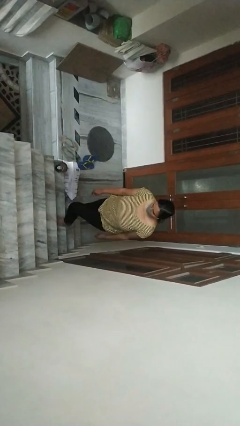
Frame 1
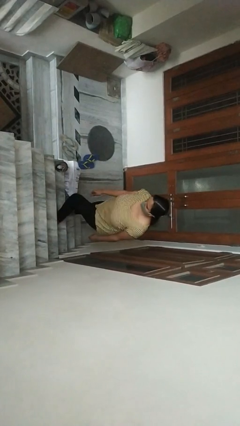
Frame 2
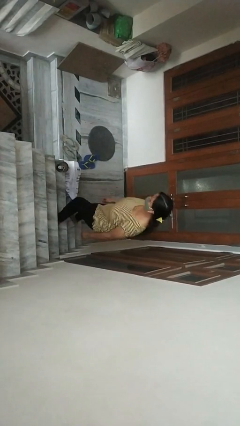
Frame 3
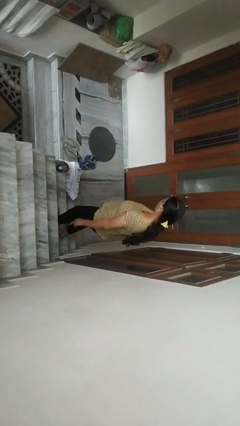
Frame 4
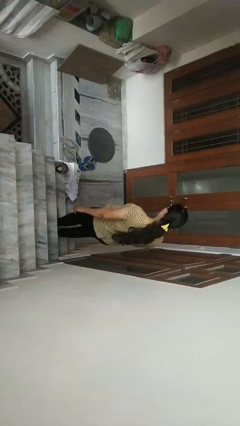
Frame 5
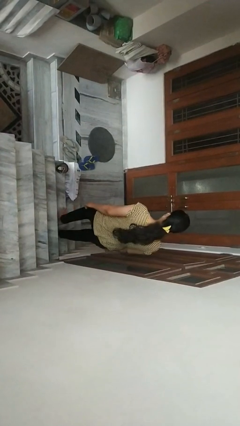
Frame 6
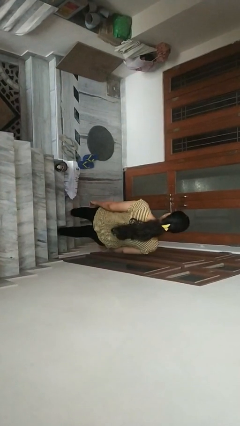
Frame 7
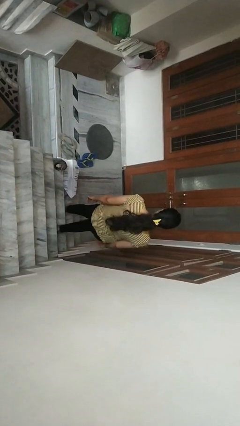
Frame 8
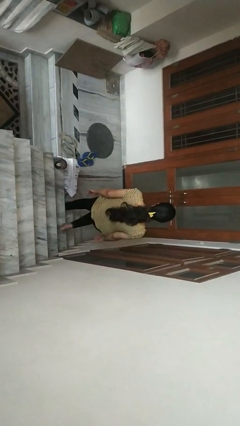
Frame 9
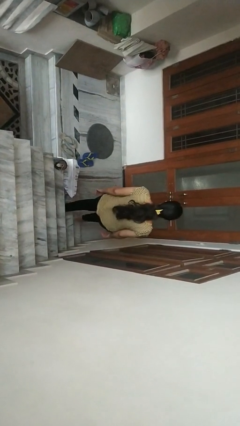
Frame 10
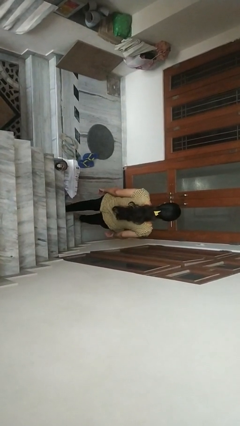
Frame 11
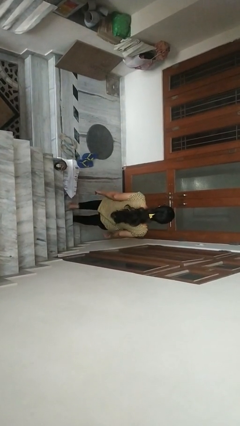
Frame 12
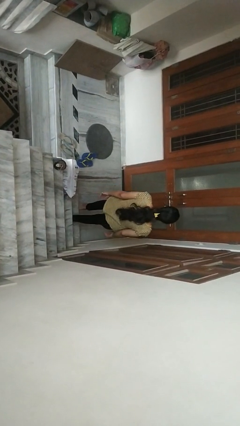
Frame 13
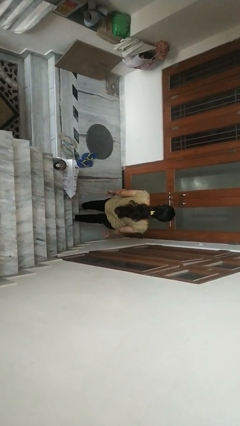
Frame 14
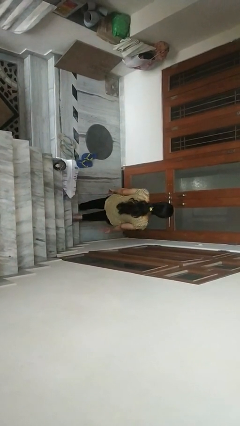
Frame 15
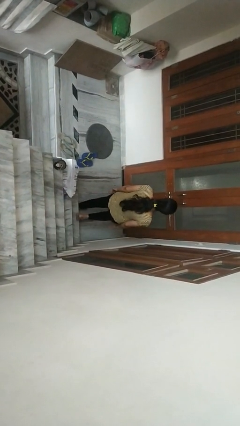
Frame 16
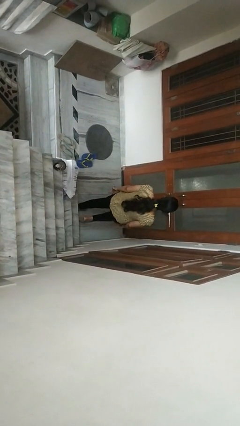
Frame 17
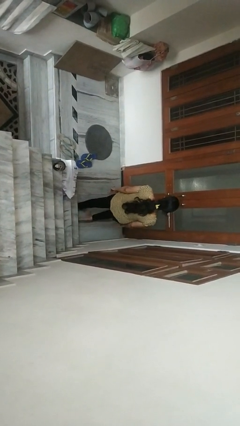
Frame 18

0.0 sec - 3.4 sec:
person climbs down stairs

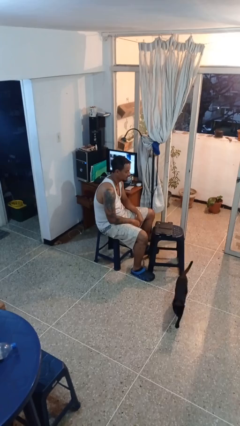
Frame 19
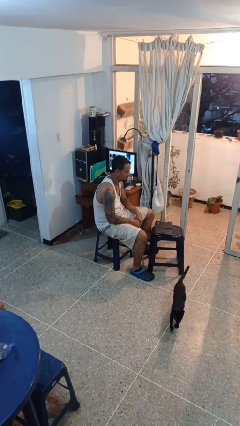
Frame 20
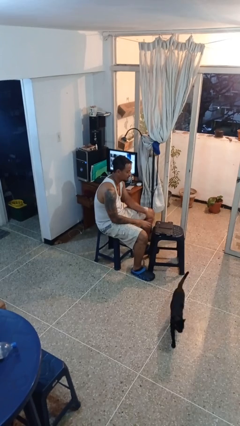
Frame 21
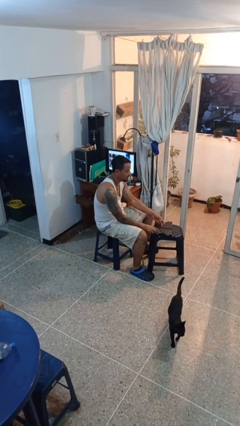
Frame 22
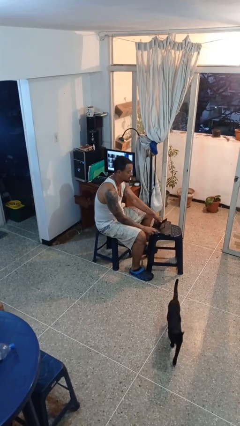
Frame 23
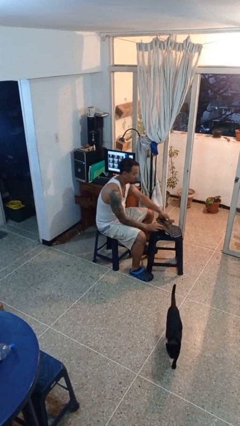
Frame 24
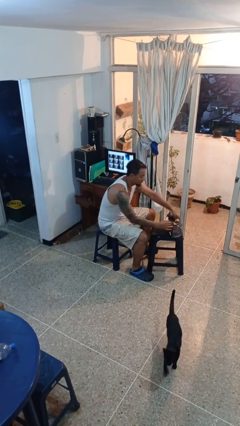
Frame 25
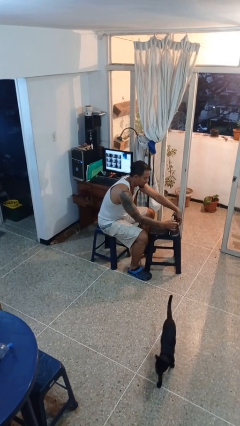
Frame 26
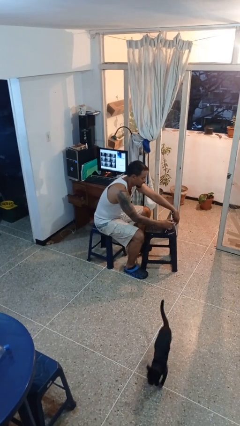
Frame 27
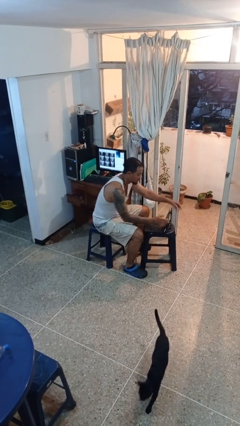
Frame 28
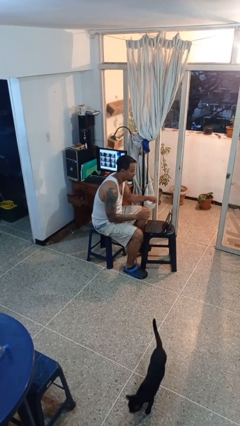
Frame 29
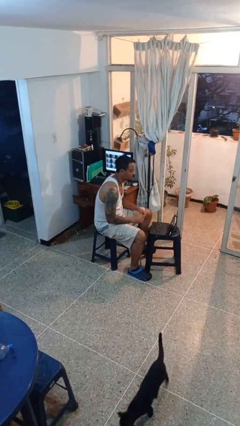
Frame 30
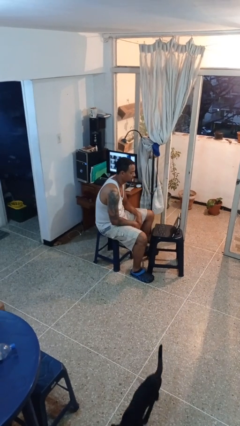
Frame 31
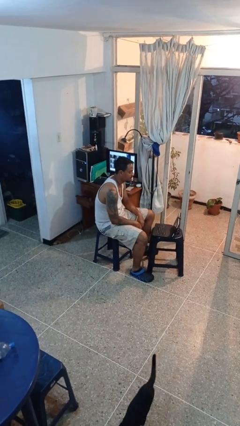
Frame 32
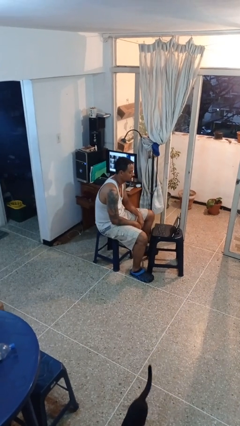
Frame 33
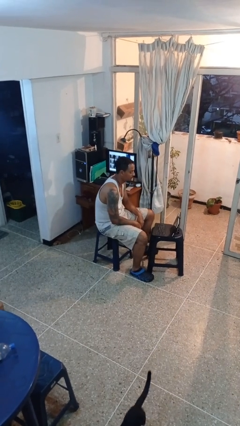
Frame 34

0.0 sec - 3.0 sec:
person opens laptop

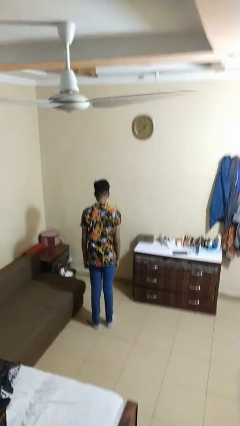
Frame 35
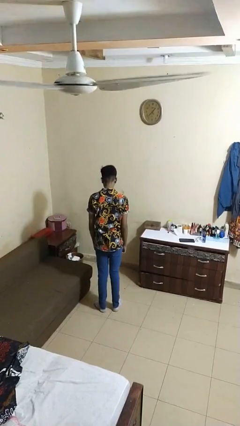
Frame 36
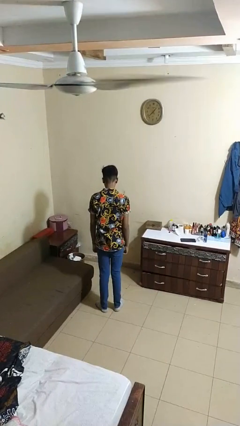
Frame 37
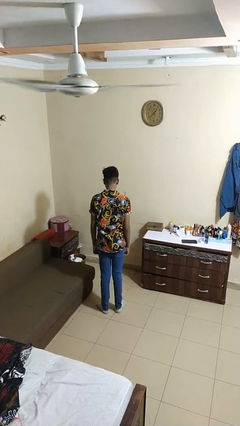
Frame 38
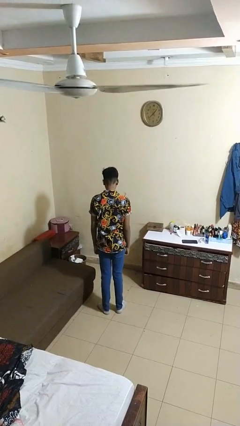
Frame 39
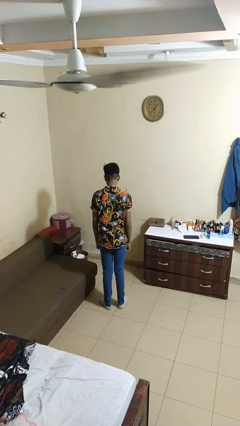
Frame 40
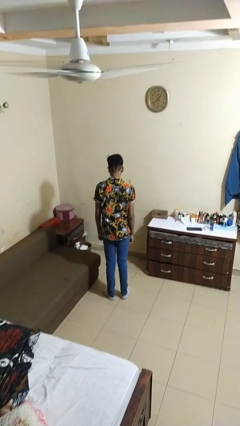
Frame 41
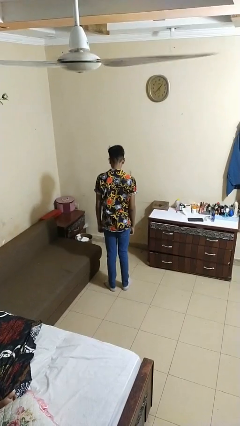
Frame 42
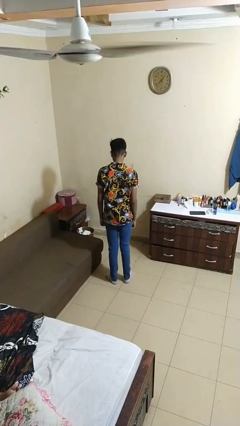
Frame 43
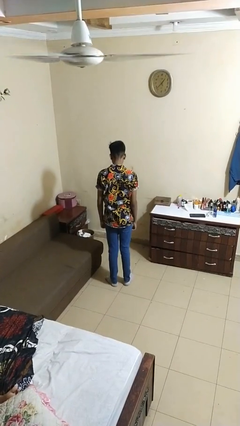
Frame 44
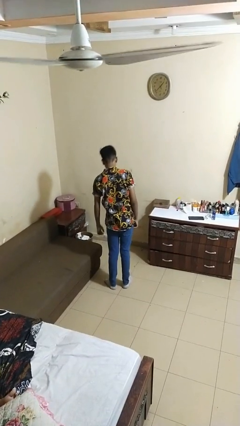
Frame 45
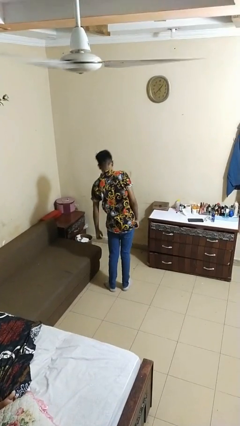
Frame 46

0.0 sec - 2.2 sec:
person stretches back

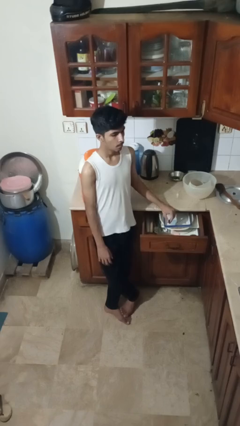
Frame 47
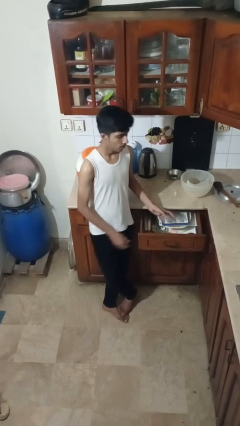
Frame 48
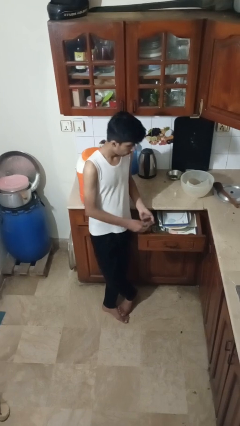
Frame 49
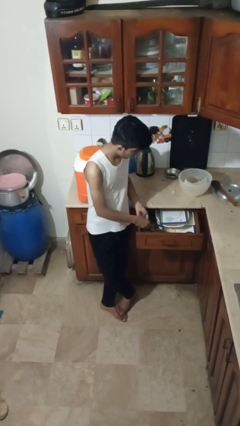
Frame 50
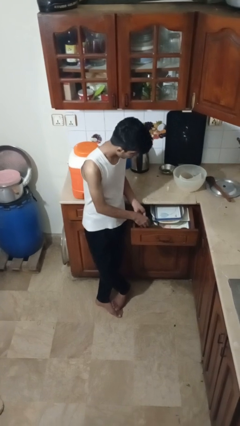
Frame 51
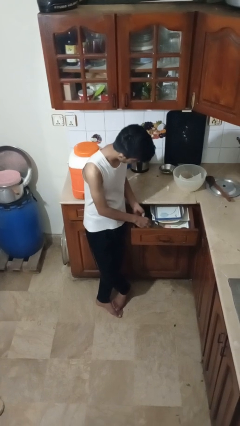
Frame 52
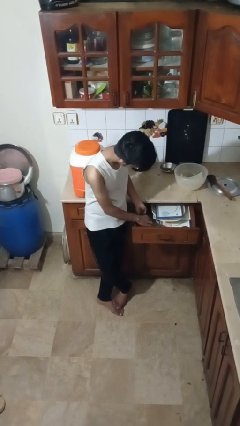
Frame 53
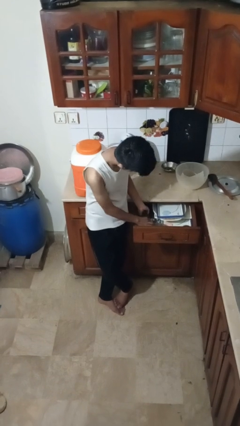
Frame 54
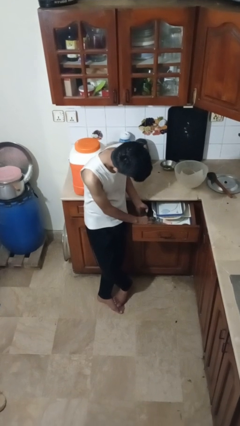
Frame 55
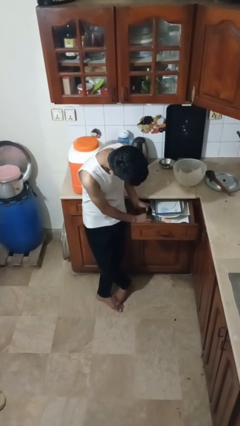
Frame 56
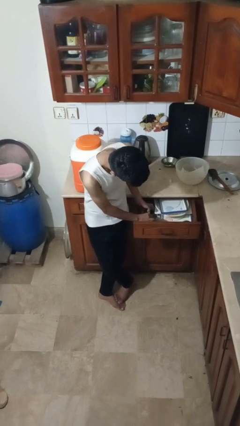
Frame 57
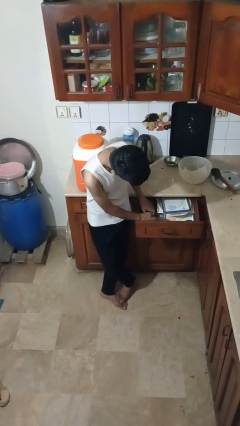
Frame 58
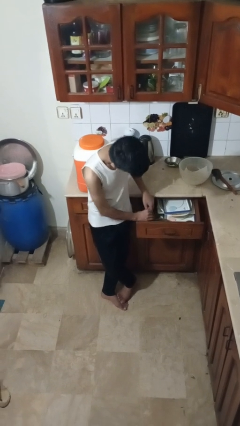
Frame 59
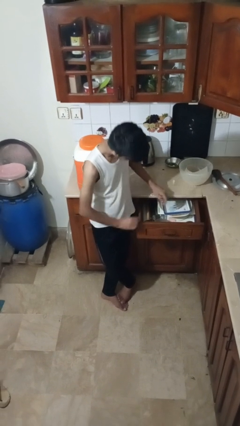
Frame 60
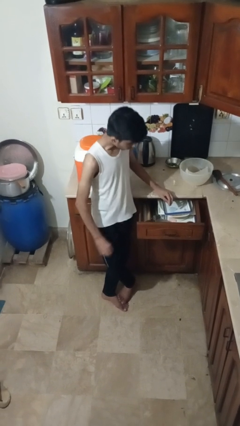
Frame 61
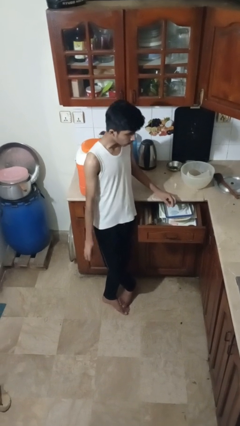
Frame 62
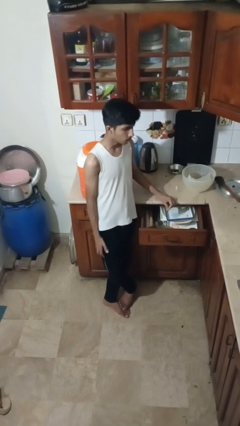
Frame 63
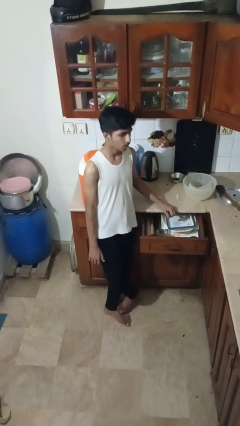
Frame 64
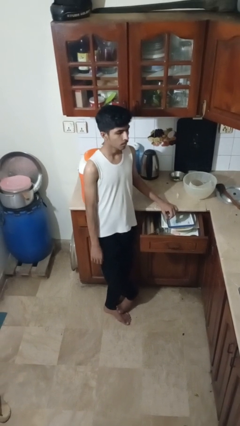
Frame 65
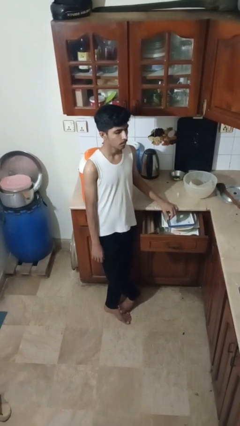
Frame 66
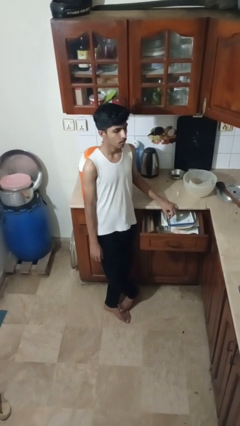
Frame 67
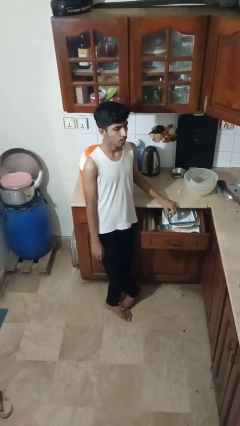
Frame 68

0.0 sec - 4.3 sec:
person searches in kitchen drawer

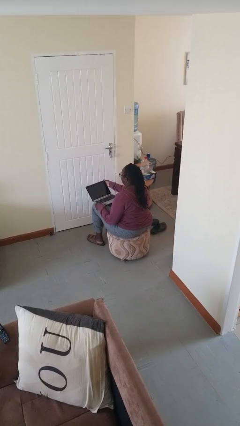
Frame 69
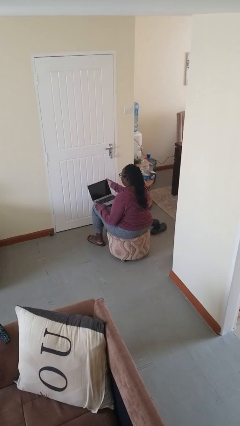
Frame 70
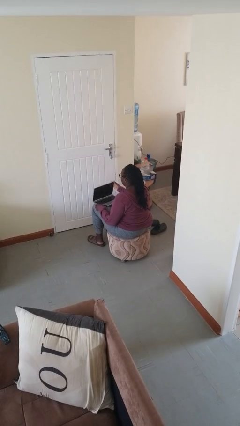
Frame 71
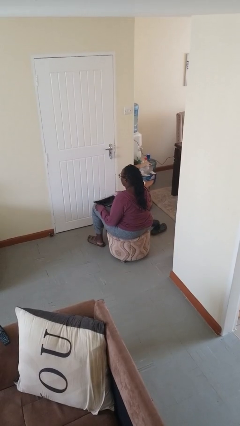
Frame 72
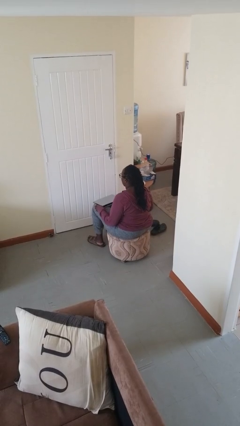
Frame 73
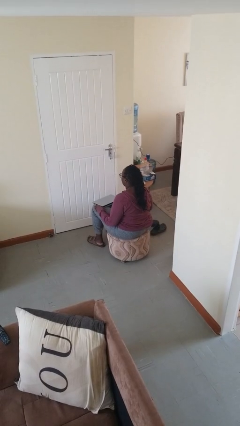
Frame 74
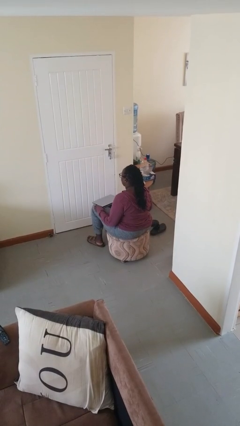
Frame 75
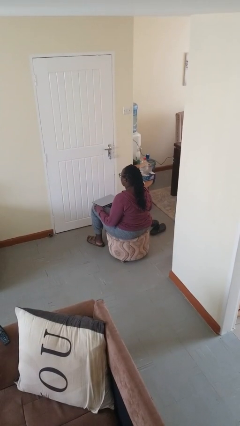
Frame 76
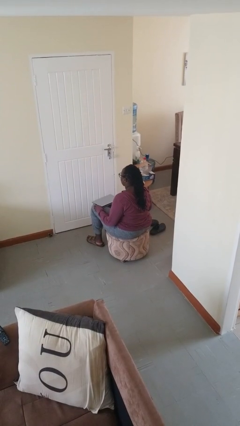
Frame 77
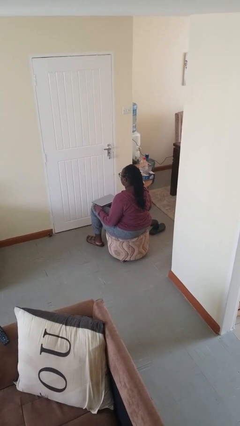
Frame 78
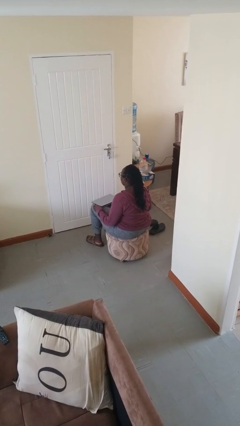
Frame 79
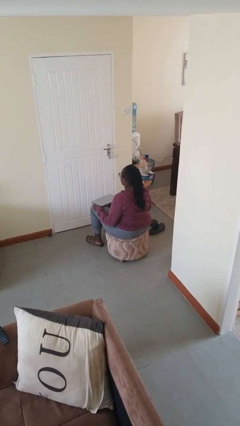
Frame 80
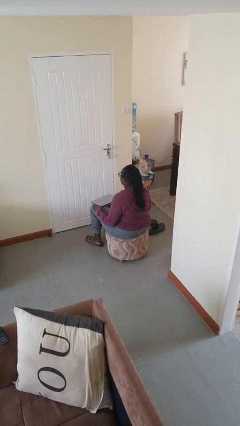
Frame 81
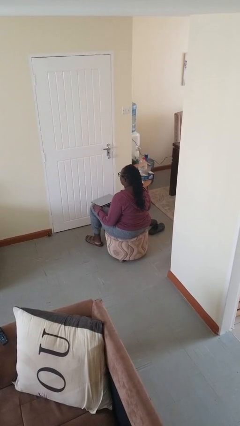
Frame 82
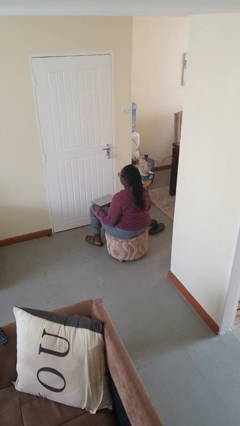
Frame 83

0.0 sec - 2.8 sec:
person closes laptop

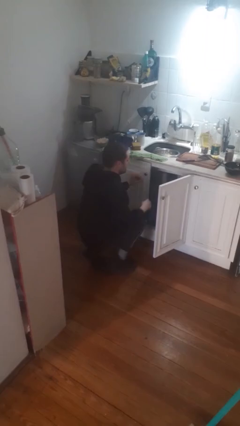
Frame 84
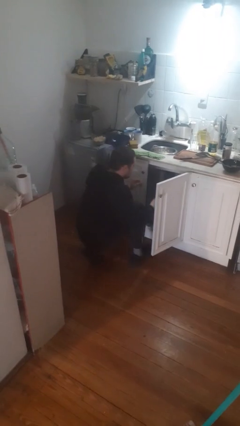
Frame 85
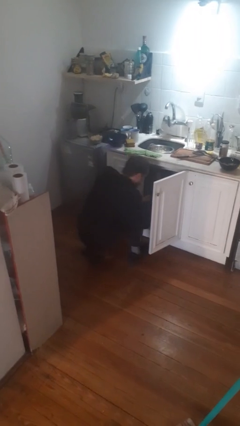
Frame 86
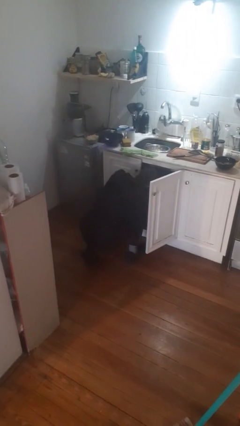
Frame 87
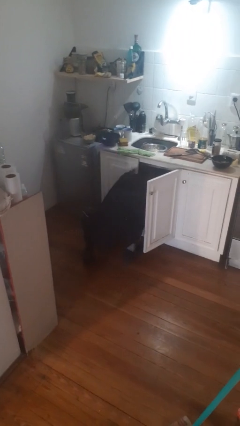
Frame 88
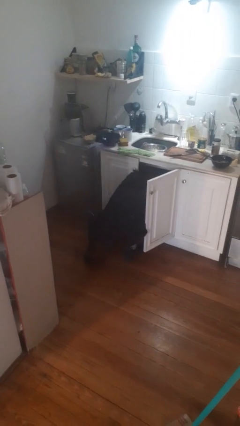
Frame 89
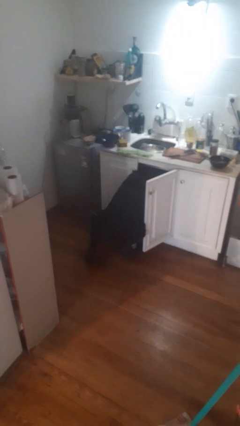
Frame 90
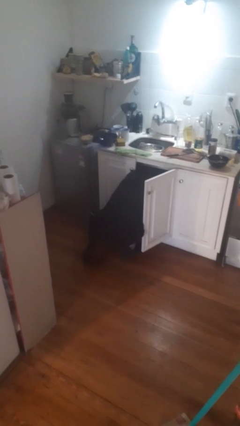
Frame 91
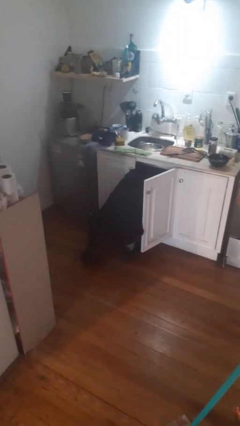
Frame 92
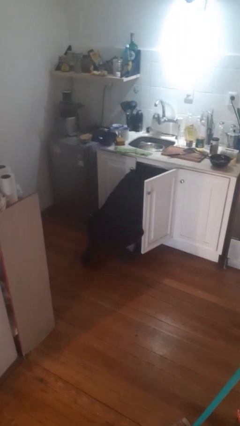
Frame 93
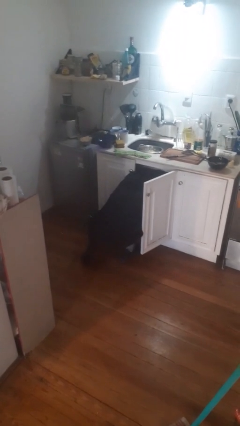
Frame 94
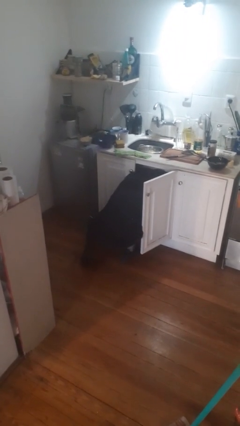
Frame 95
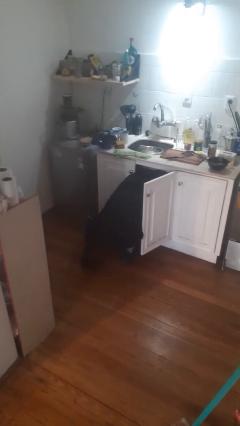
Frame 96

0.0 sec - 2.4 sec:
person searches in cabinet
